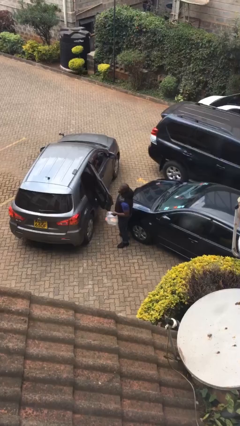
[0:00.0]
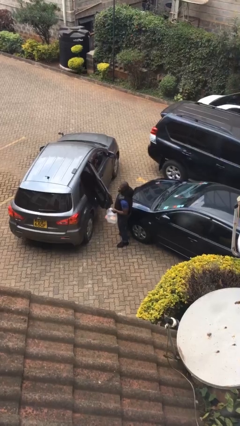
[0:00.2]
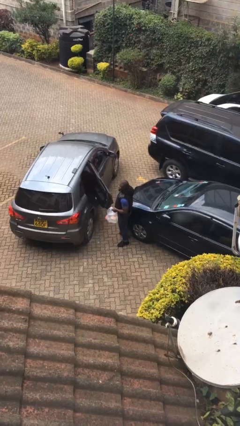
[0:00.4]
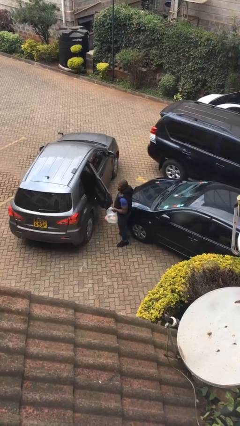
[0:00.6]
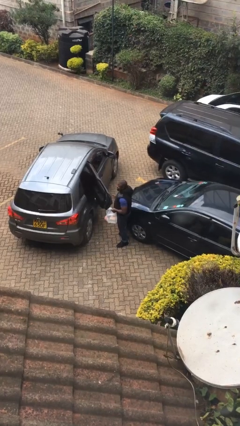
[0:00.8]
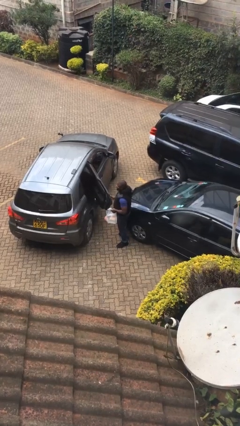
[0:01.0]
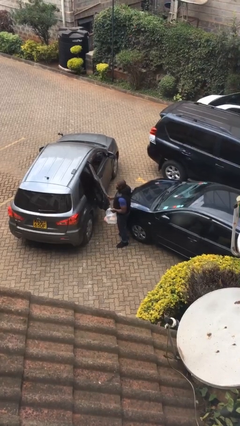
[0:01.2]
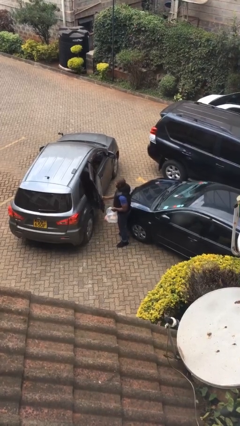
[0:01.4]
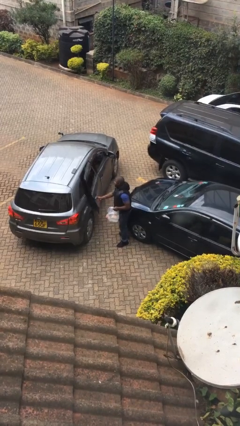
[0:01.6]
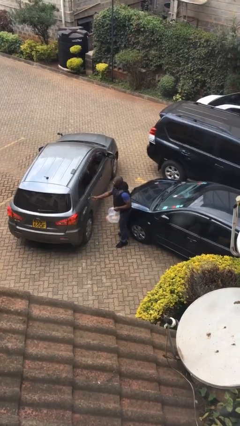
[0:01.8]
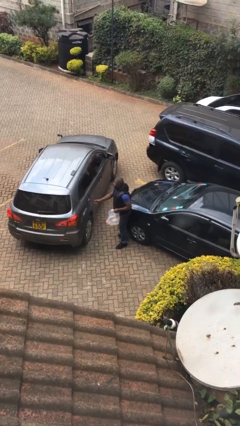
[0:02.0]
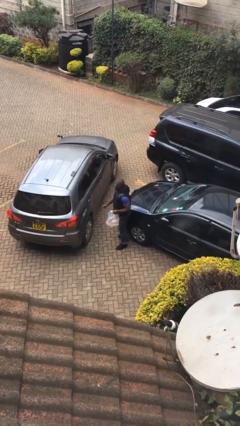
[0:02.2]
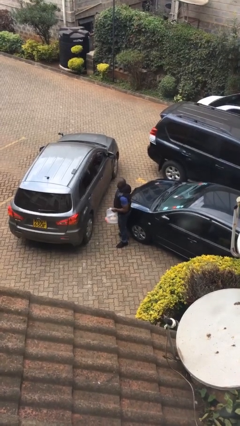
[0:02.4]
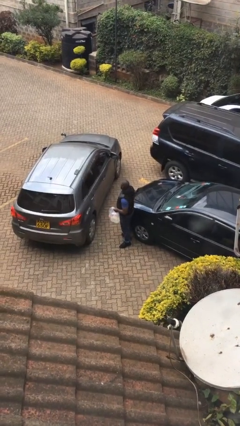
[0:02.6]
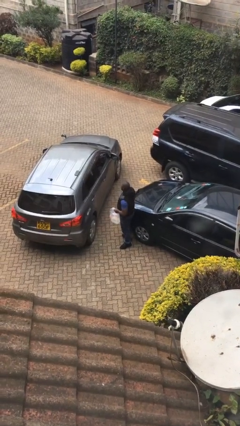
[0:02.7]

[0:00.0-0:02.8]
person closes car door

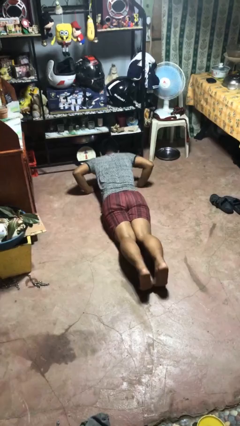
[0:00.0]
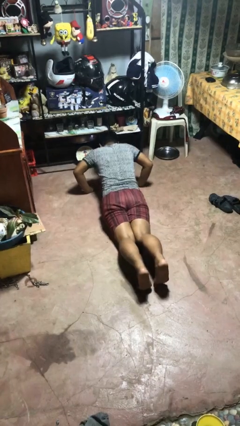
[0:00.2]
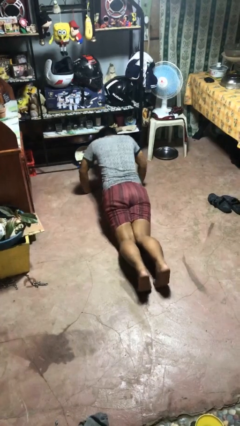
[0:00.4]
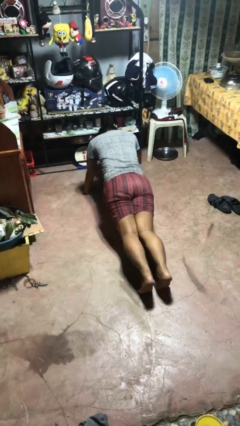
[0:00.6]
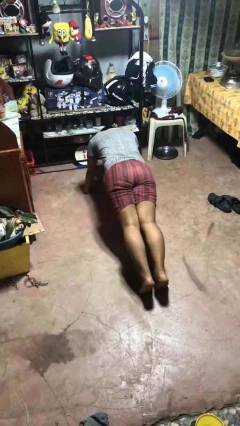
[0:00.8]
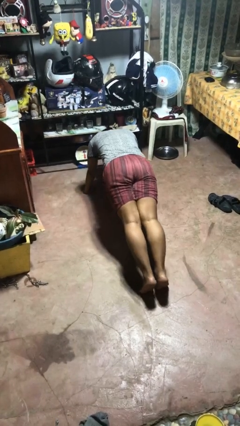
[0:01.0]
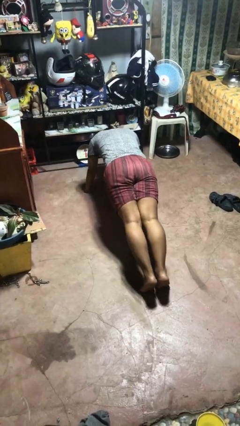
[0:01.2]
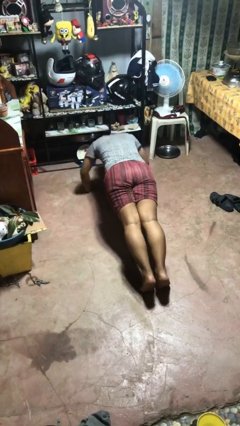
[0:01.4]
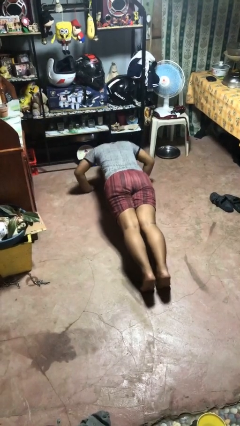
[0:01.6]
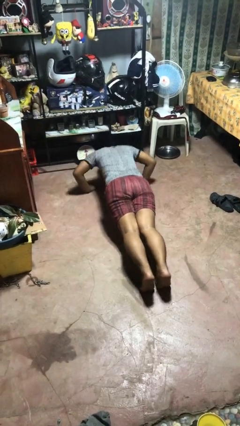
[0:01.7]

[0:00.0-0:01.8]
person exercises with pushup

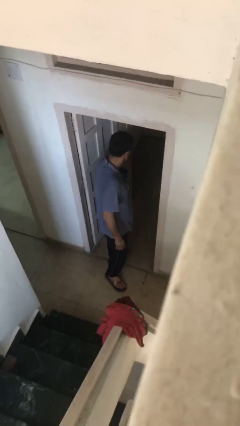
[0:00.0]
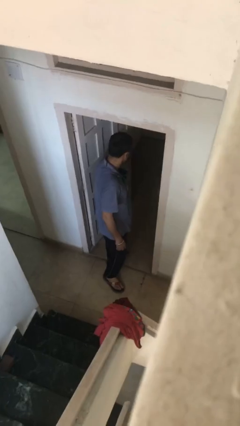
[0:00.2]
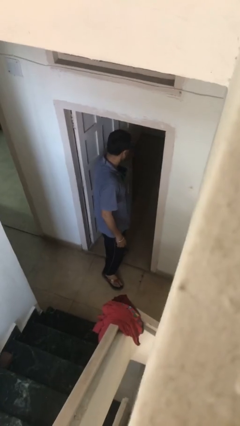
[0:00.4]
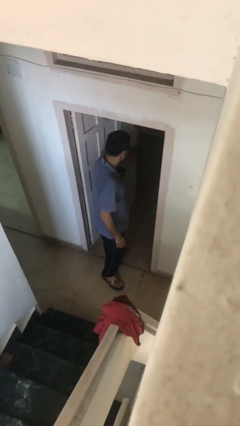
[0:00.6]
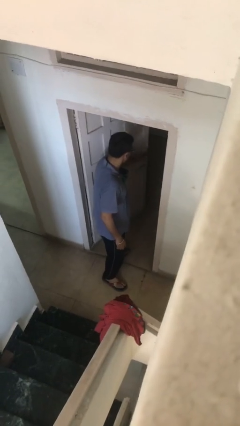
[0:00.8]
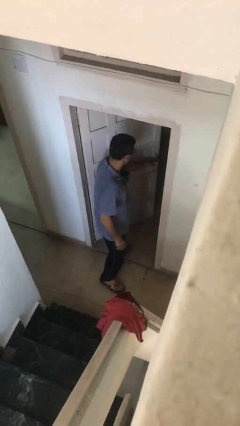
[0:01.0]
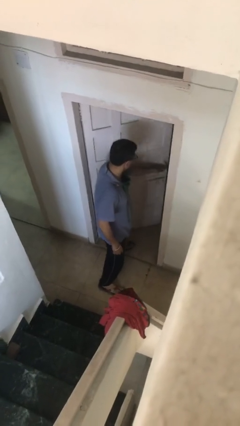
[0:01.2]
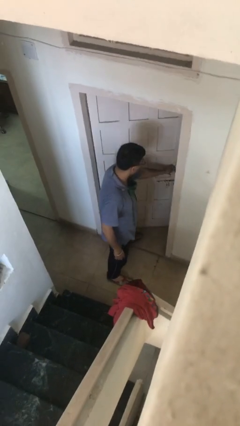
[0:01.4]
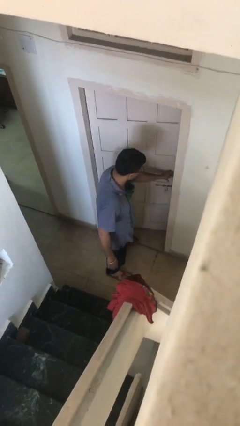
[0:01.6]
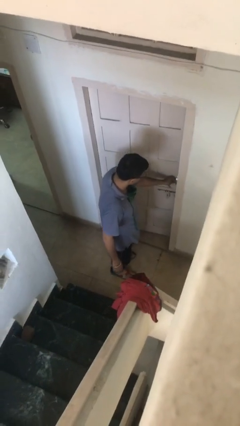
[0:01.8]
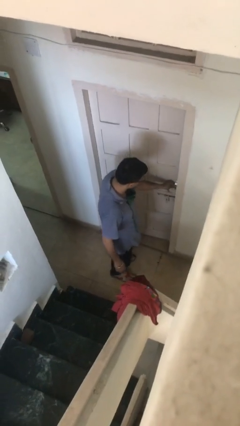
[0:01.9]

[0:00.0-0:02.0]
person closes facility door

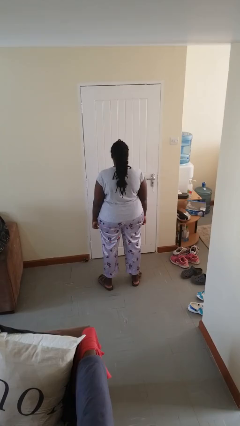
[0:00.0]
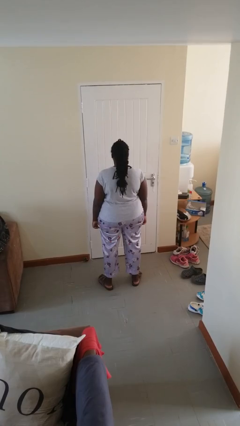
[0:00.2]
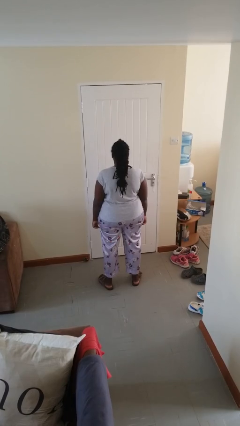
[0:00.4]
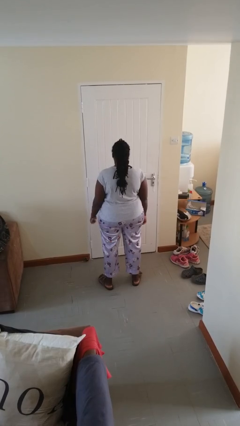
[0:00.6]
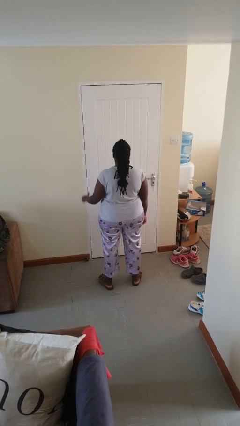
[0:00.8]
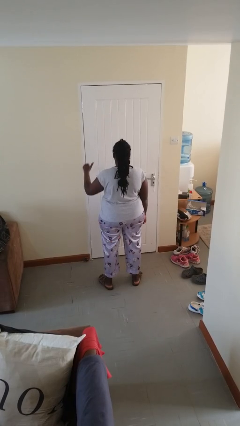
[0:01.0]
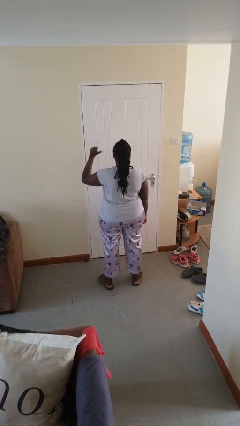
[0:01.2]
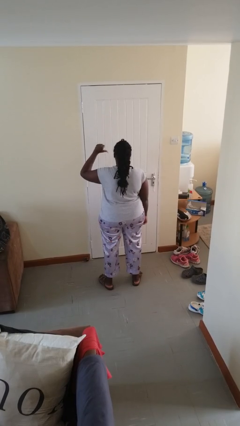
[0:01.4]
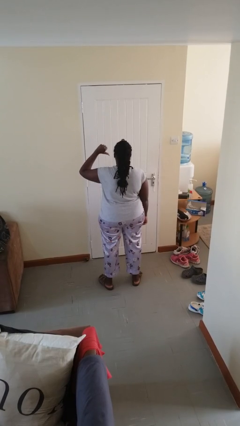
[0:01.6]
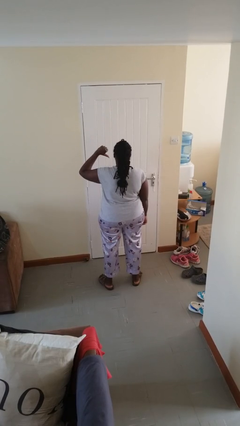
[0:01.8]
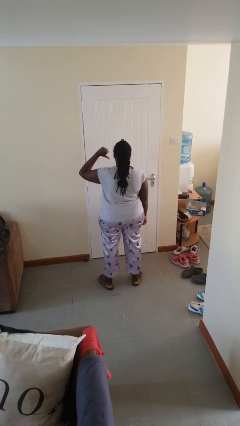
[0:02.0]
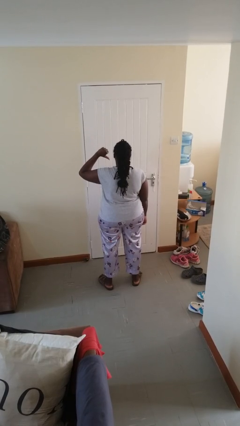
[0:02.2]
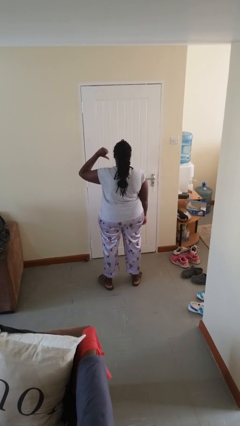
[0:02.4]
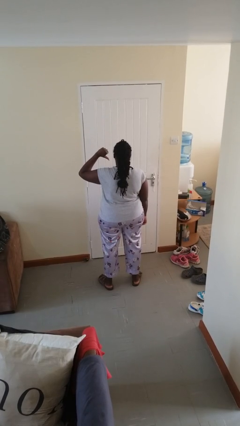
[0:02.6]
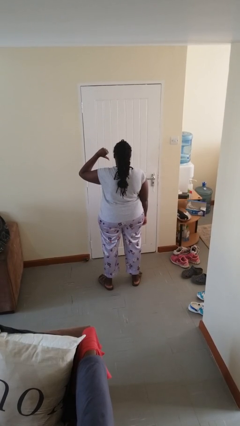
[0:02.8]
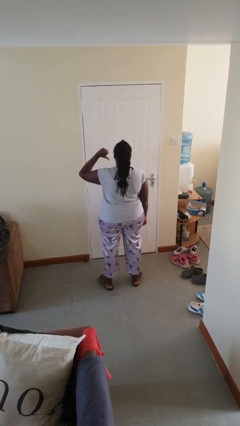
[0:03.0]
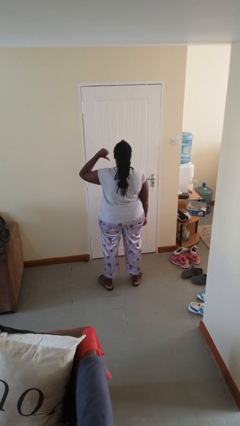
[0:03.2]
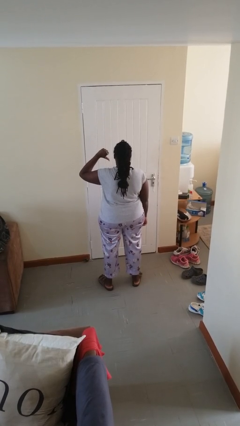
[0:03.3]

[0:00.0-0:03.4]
person gestures thumbs down

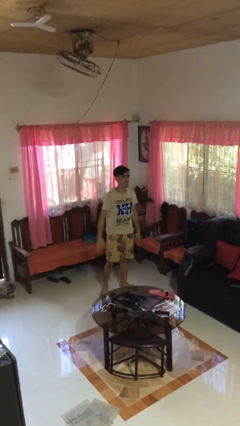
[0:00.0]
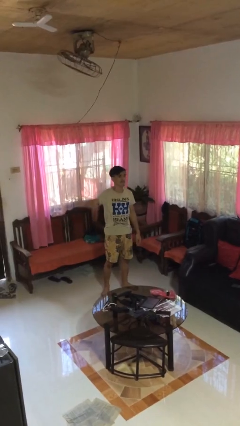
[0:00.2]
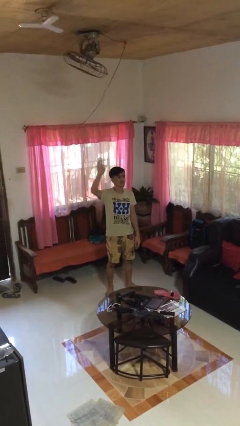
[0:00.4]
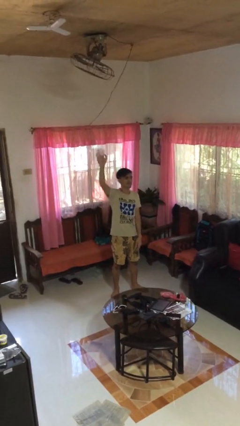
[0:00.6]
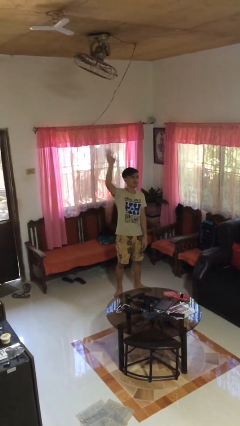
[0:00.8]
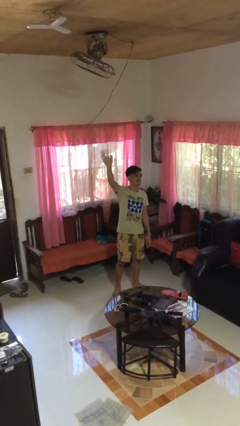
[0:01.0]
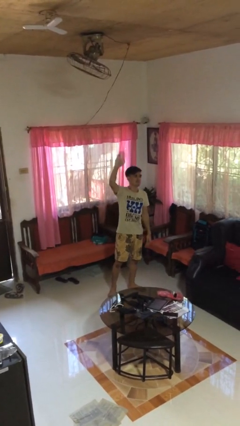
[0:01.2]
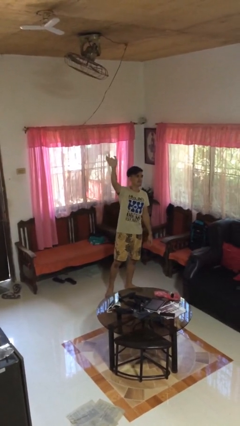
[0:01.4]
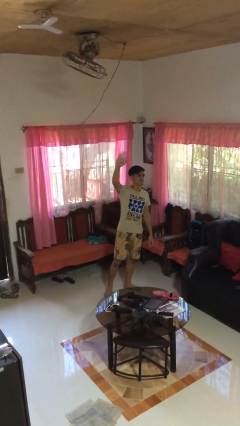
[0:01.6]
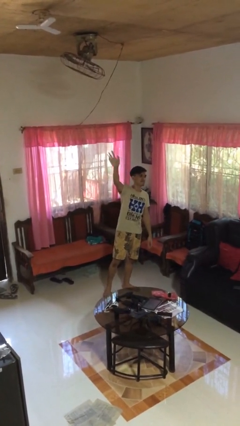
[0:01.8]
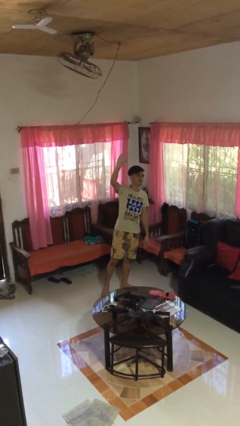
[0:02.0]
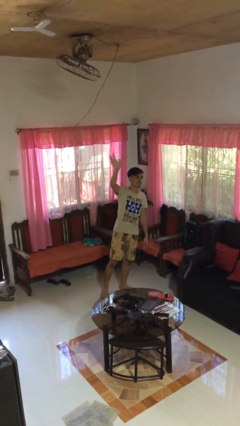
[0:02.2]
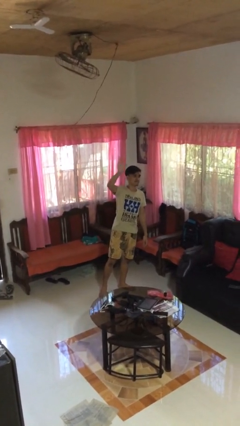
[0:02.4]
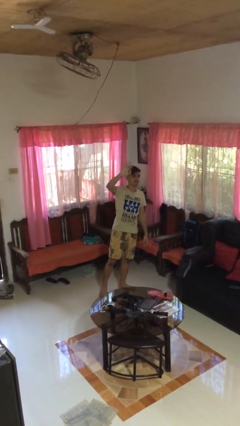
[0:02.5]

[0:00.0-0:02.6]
person waves at person

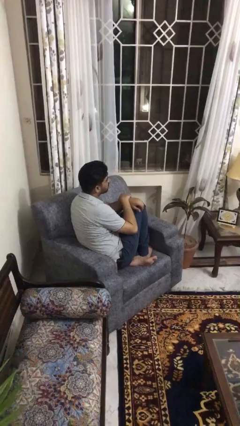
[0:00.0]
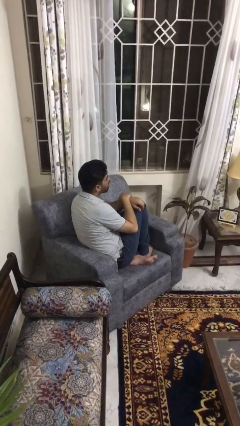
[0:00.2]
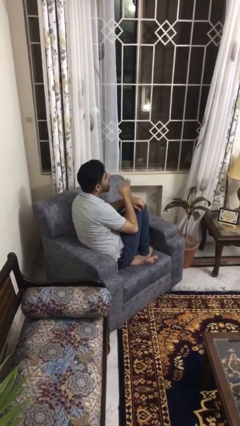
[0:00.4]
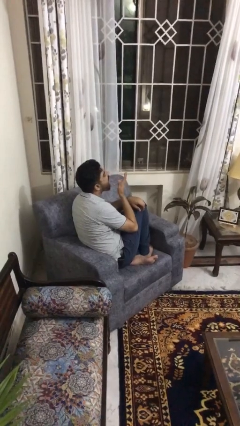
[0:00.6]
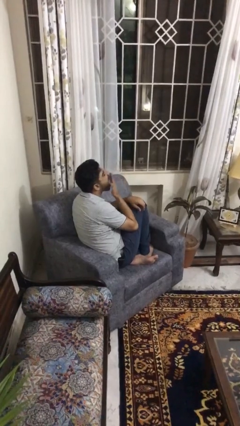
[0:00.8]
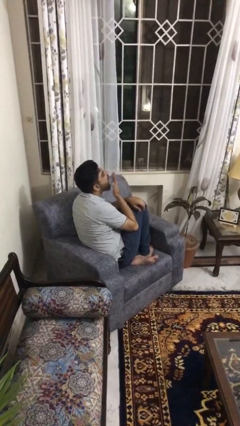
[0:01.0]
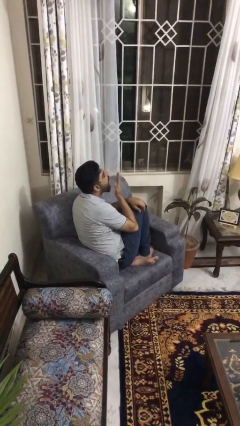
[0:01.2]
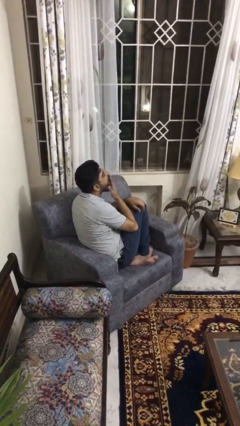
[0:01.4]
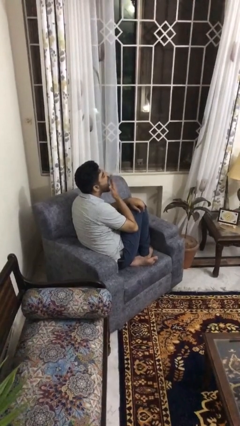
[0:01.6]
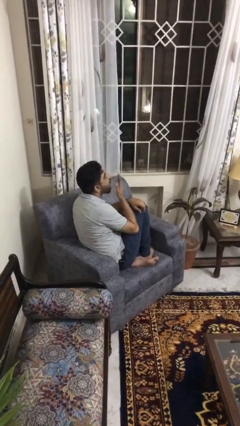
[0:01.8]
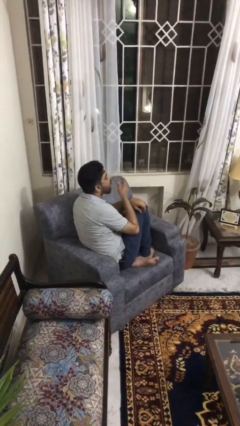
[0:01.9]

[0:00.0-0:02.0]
person yawns

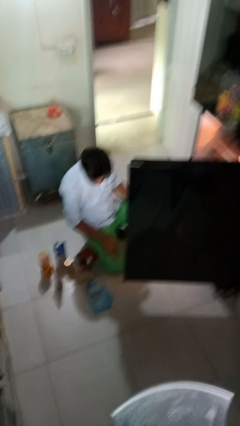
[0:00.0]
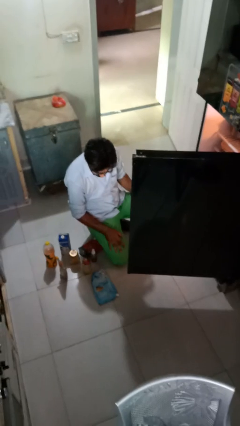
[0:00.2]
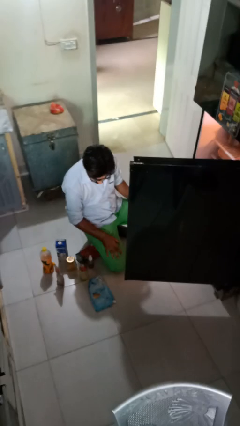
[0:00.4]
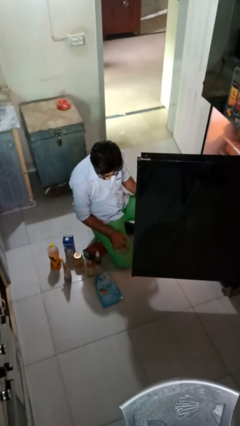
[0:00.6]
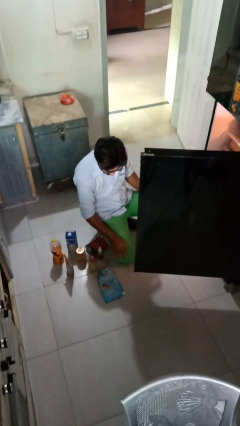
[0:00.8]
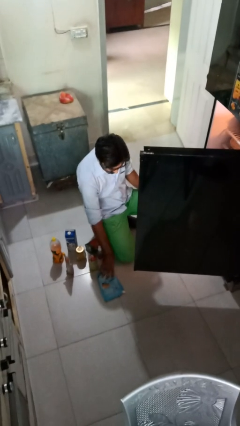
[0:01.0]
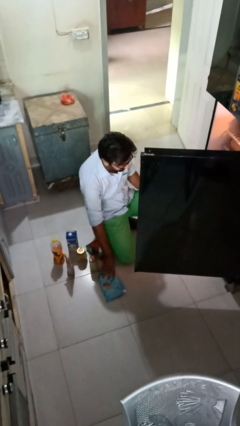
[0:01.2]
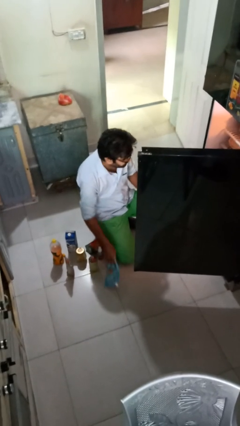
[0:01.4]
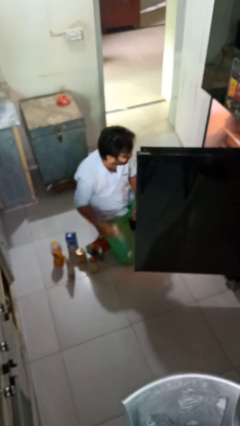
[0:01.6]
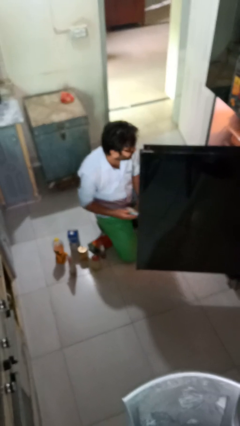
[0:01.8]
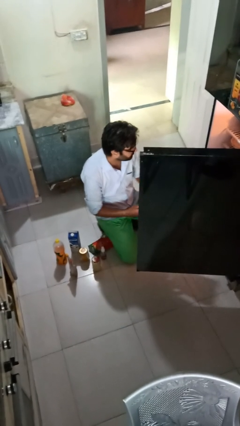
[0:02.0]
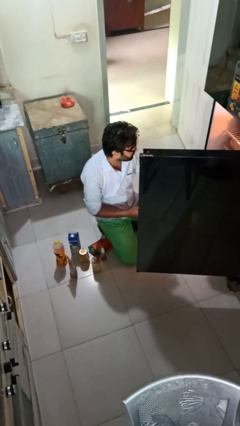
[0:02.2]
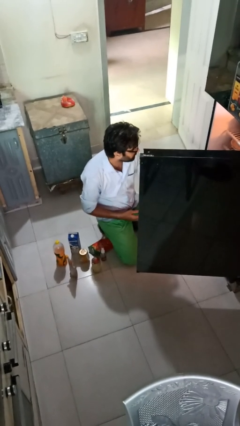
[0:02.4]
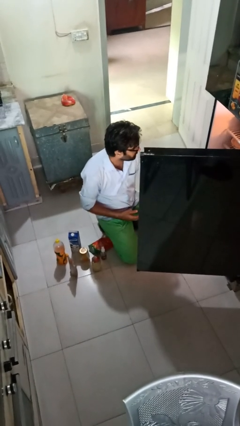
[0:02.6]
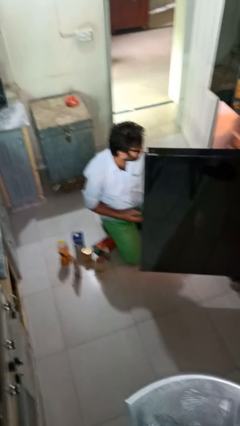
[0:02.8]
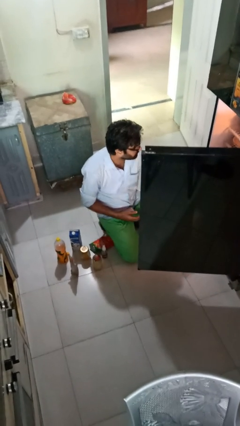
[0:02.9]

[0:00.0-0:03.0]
person loads groceries into refrigerator
